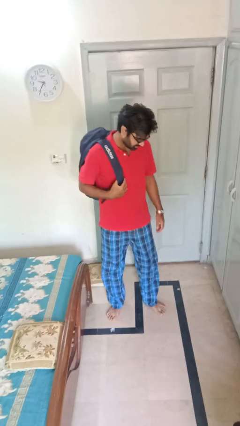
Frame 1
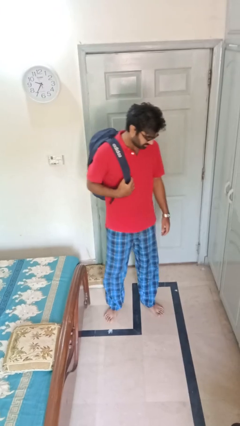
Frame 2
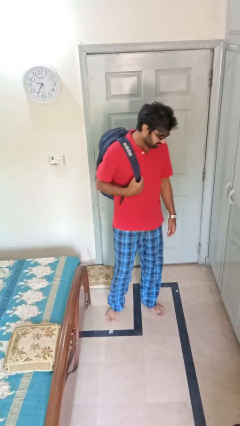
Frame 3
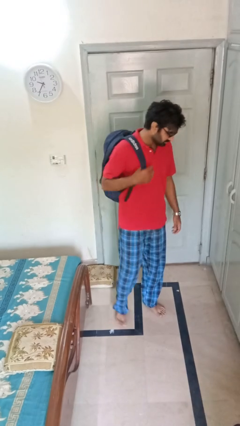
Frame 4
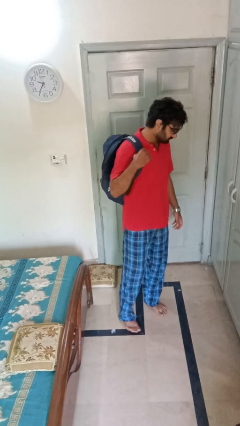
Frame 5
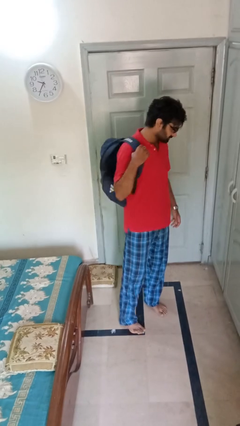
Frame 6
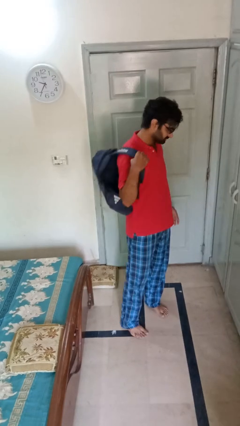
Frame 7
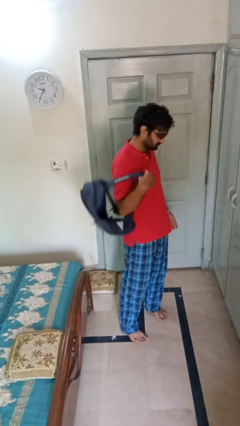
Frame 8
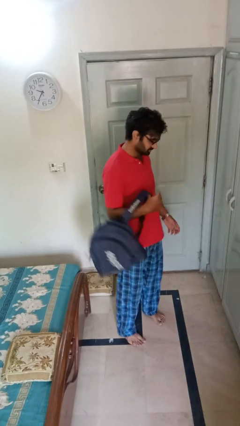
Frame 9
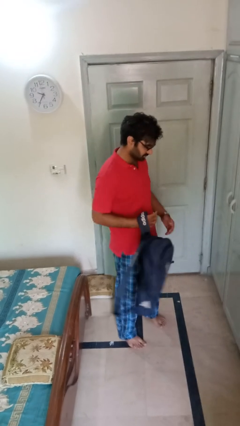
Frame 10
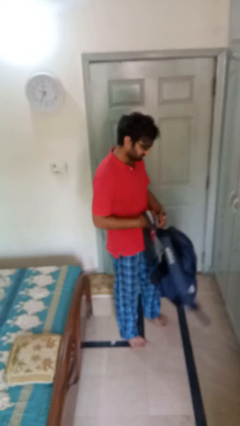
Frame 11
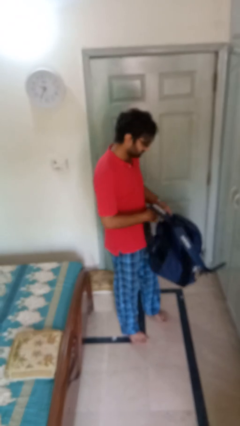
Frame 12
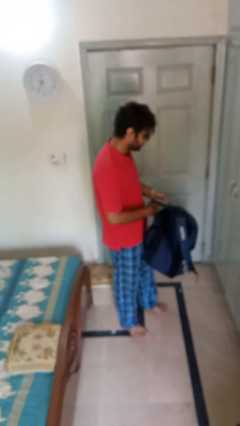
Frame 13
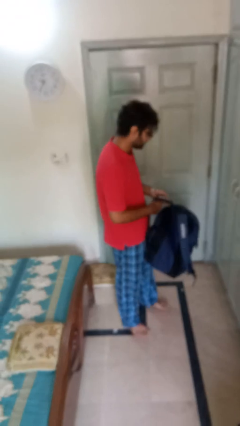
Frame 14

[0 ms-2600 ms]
person takes off backpack

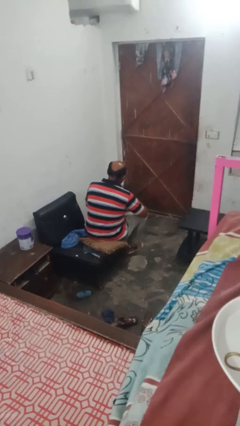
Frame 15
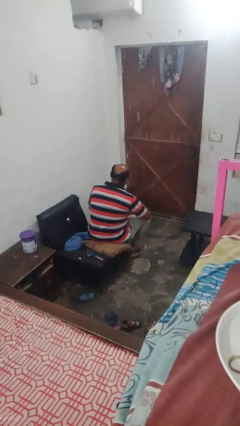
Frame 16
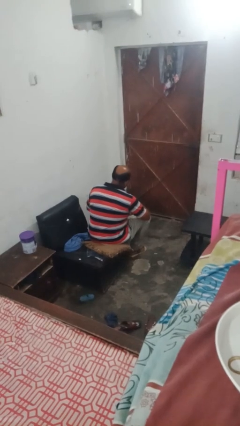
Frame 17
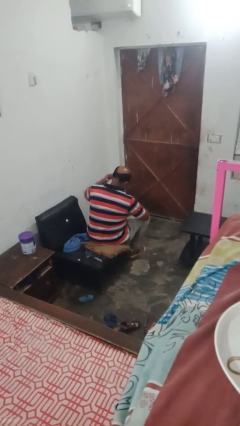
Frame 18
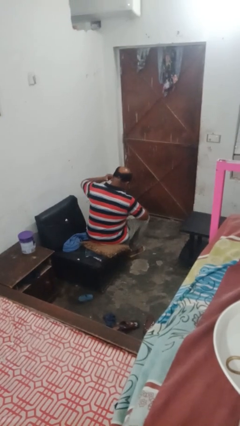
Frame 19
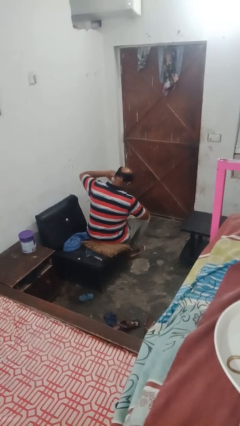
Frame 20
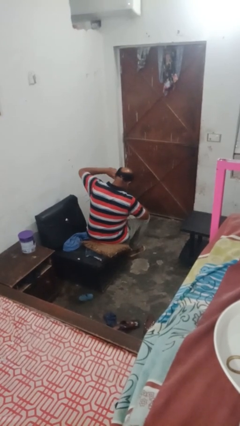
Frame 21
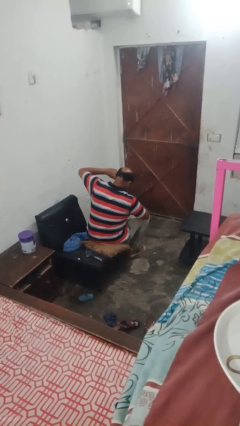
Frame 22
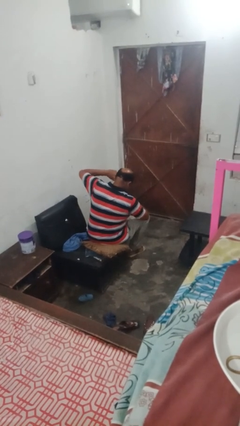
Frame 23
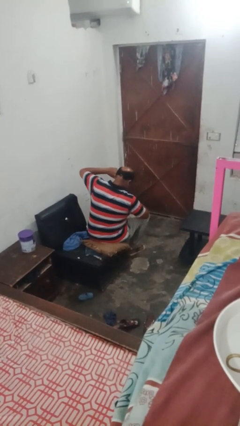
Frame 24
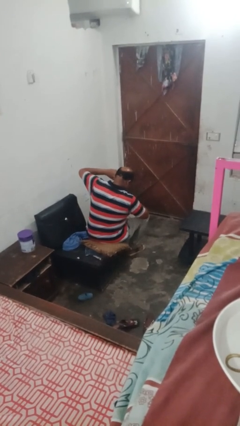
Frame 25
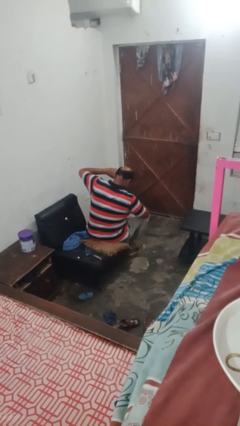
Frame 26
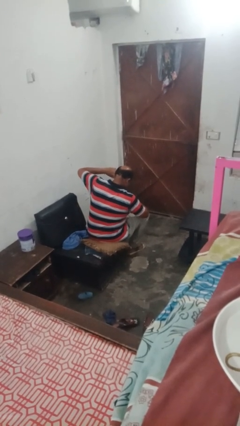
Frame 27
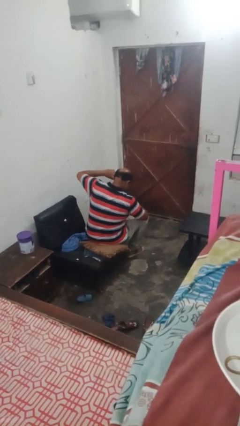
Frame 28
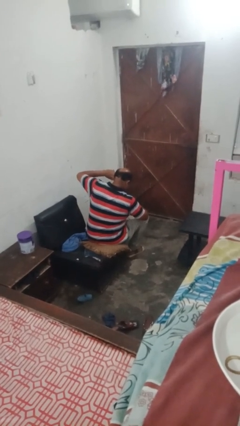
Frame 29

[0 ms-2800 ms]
person puts fingers in ear

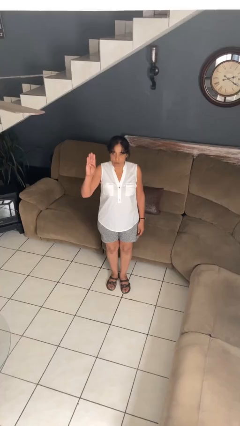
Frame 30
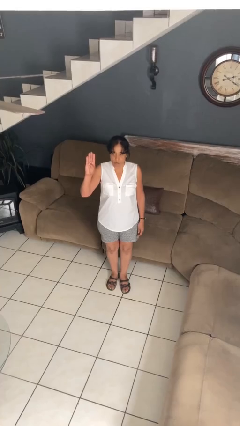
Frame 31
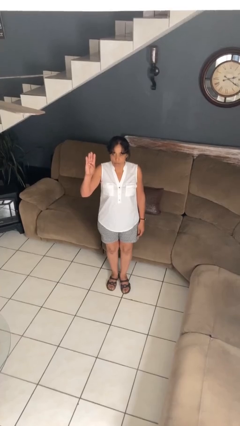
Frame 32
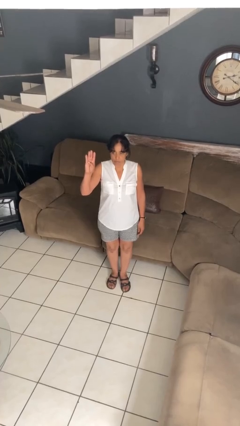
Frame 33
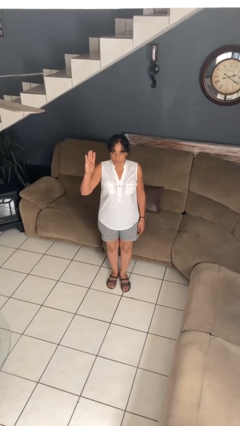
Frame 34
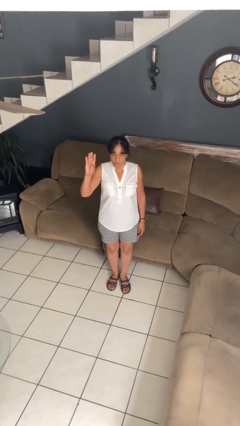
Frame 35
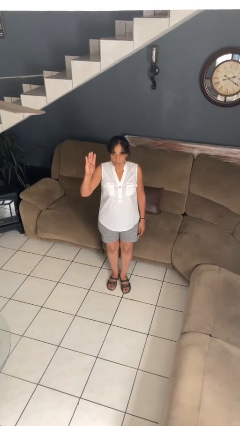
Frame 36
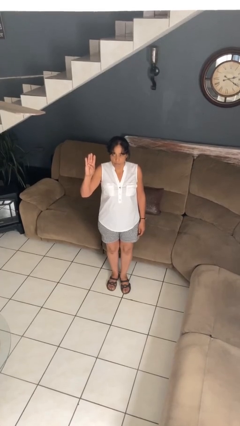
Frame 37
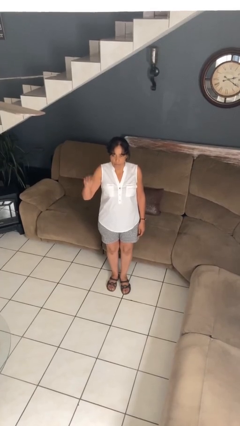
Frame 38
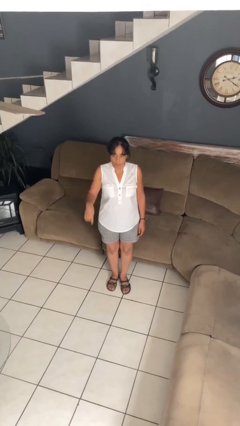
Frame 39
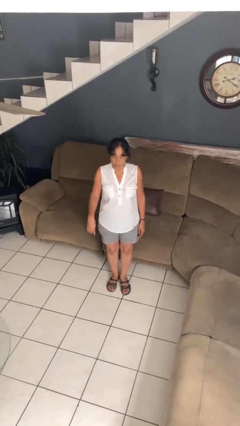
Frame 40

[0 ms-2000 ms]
person gestures number four

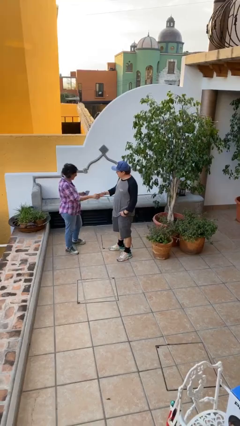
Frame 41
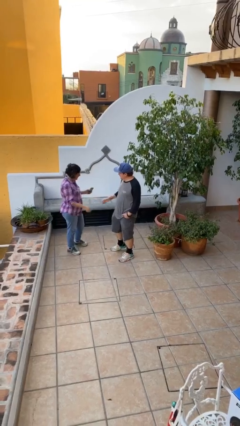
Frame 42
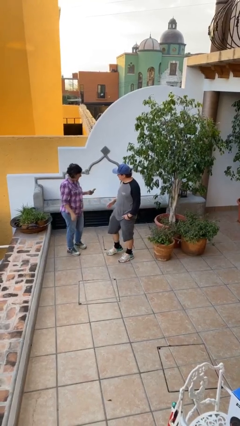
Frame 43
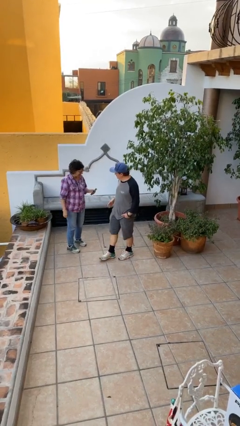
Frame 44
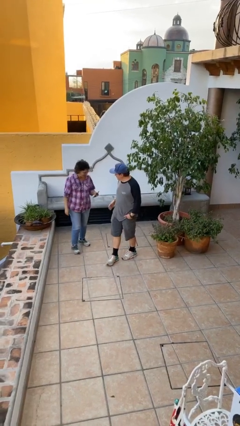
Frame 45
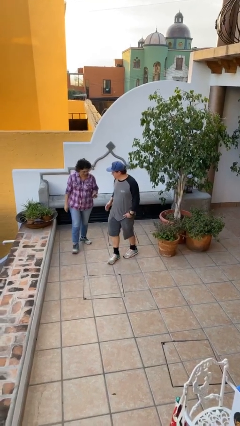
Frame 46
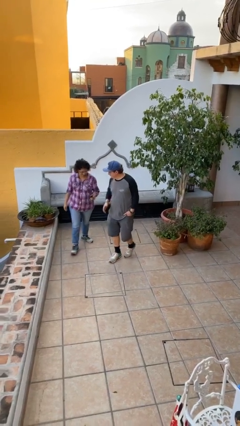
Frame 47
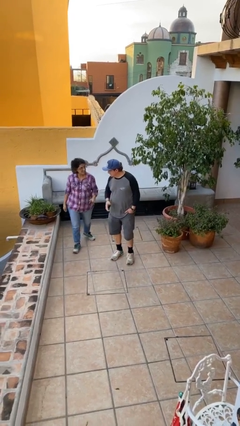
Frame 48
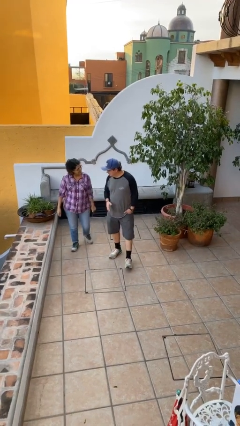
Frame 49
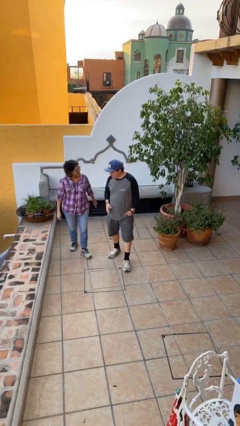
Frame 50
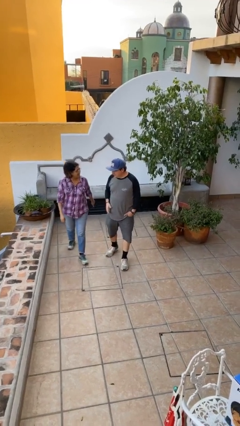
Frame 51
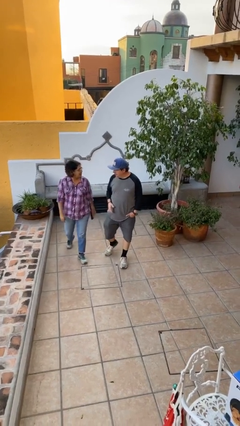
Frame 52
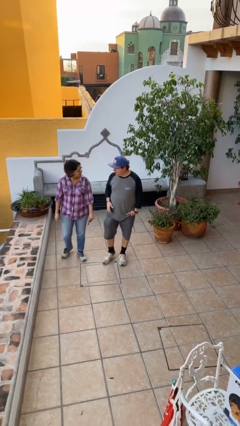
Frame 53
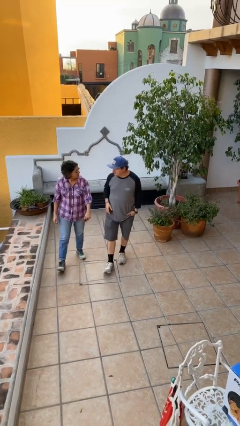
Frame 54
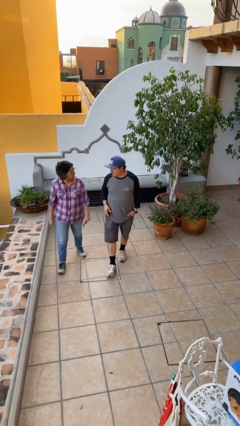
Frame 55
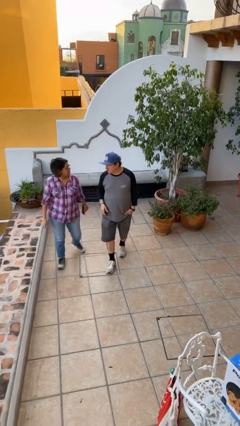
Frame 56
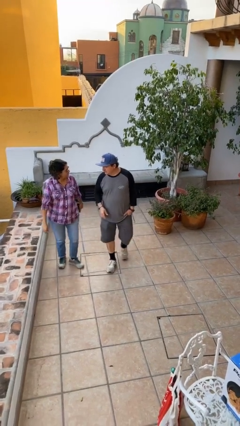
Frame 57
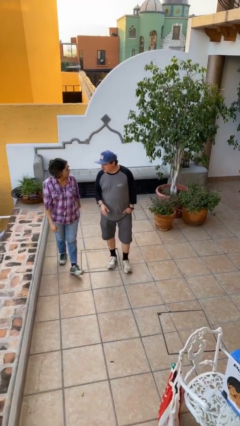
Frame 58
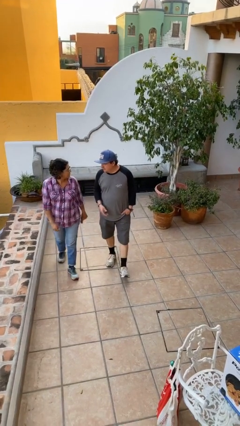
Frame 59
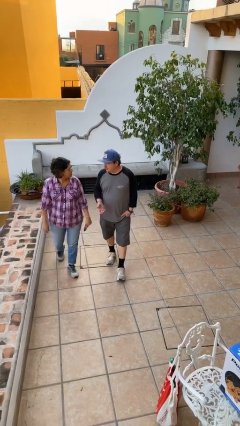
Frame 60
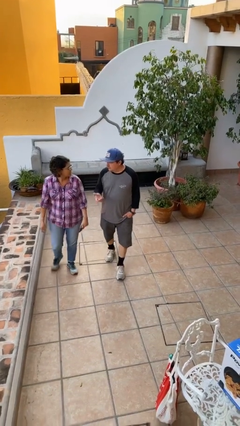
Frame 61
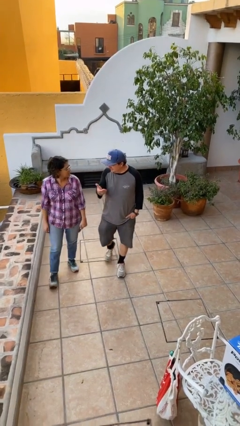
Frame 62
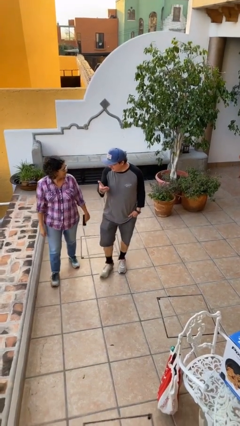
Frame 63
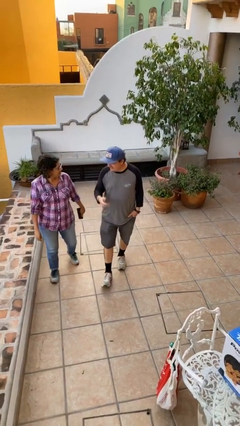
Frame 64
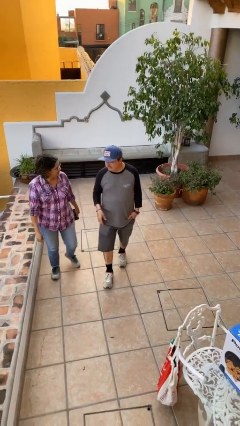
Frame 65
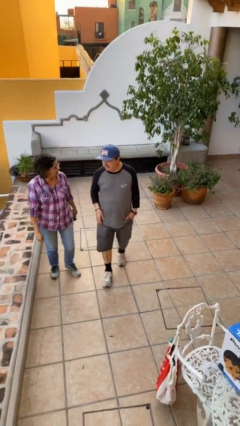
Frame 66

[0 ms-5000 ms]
person talks to person

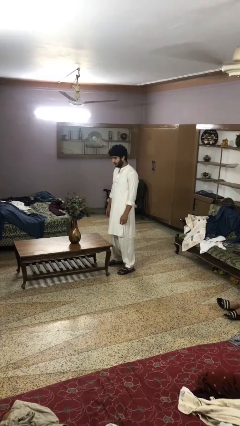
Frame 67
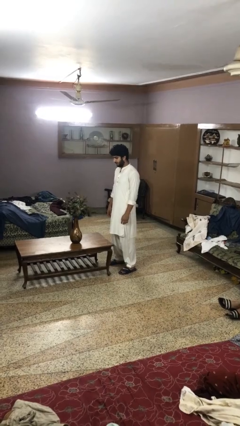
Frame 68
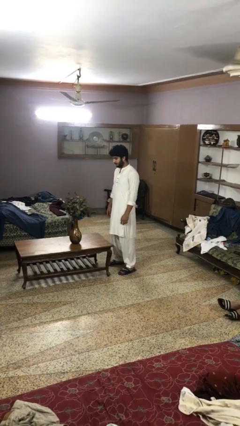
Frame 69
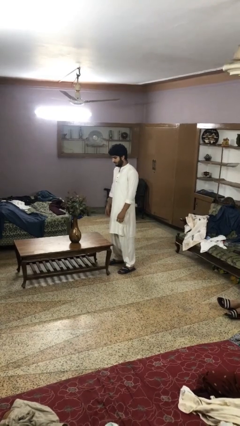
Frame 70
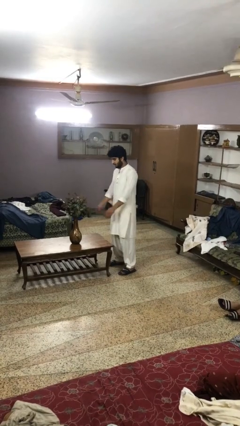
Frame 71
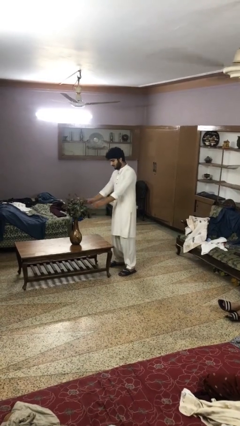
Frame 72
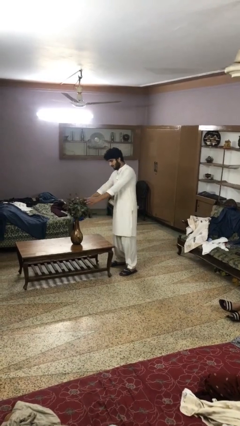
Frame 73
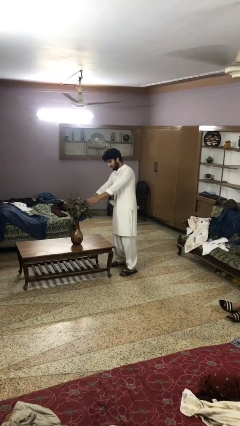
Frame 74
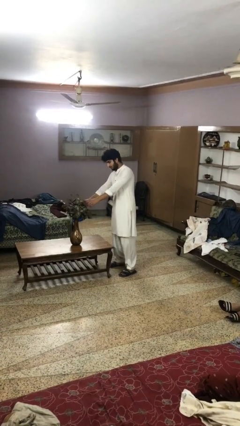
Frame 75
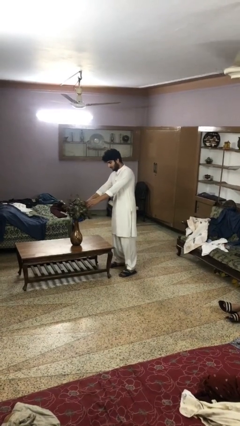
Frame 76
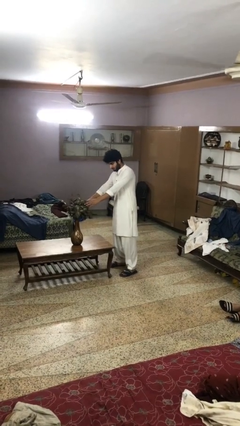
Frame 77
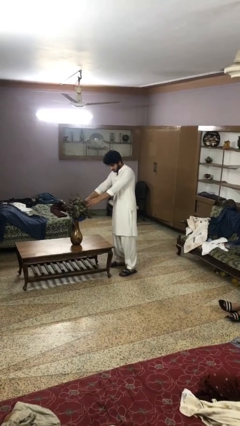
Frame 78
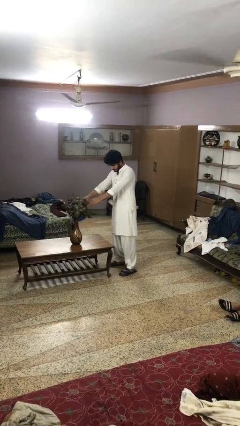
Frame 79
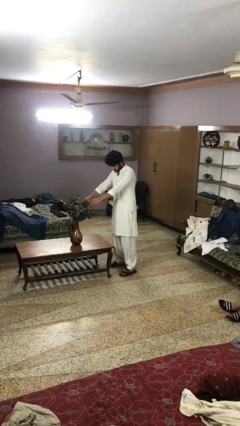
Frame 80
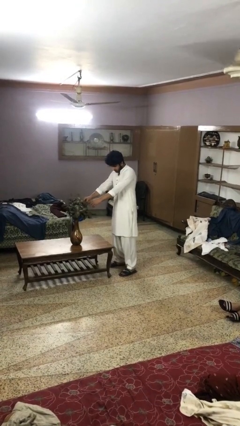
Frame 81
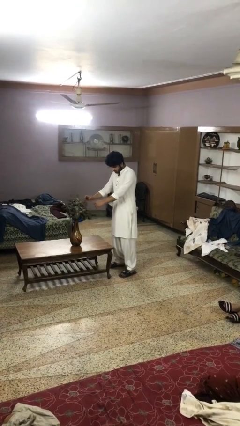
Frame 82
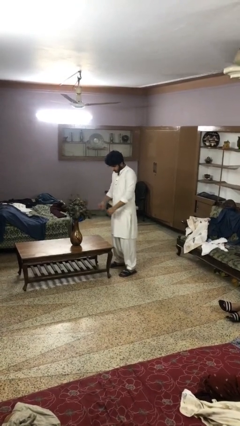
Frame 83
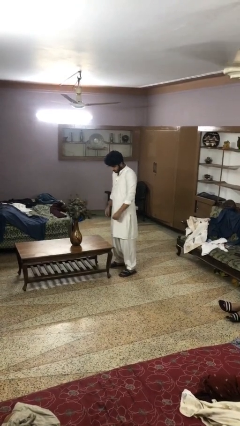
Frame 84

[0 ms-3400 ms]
person arranges flowers in vase

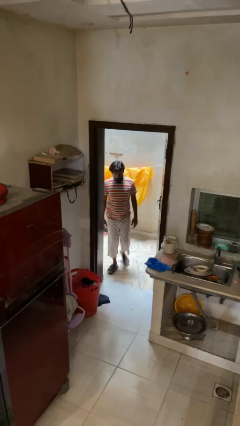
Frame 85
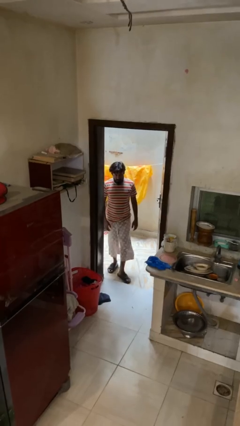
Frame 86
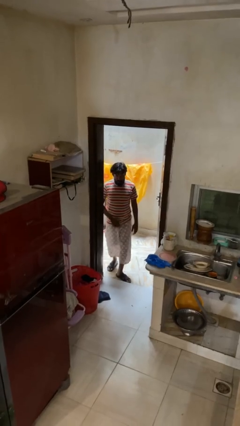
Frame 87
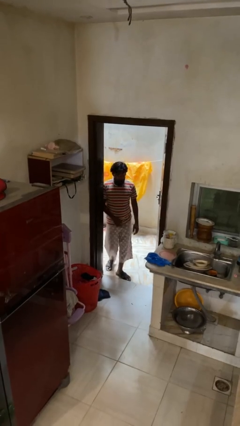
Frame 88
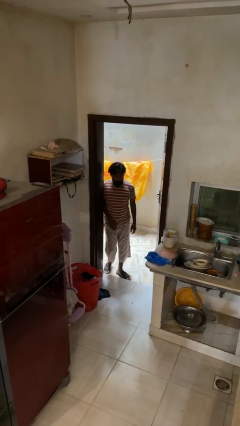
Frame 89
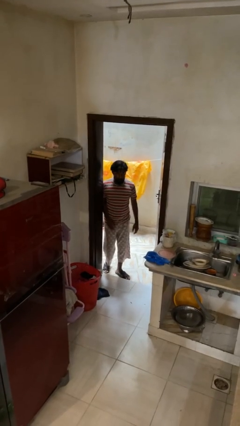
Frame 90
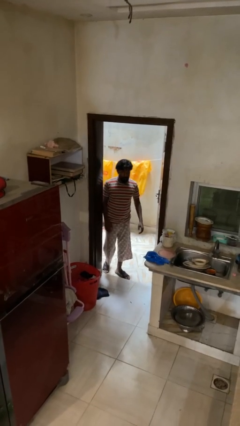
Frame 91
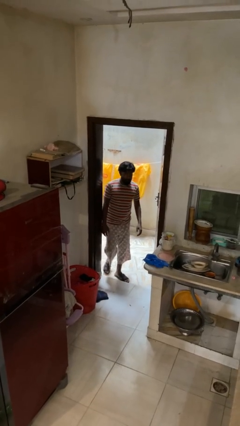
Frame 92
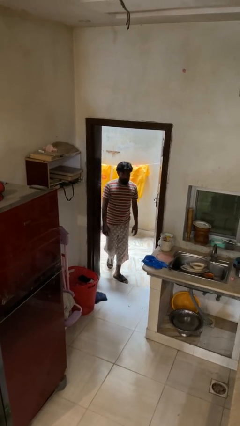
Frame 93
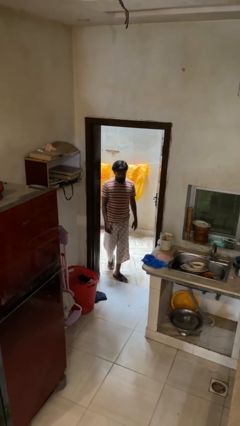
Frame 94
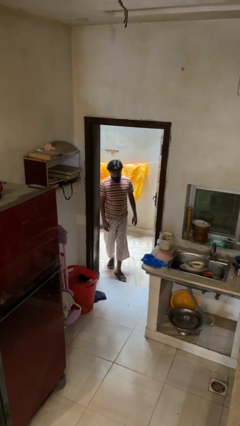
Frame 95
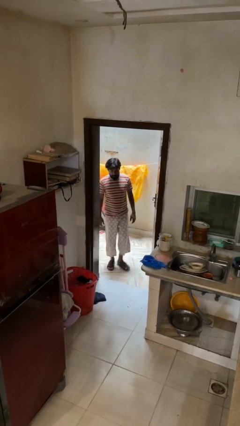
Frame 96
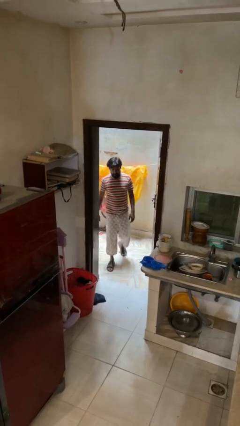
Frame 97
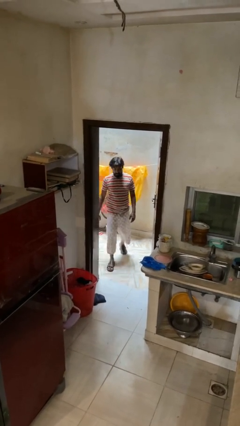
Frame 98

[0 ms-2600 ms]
person bumps into wall
